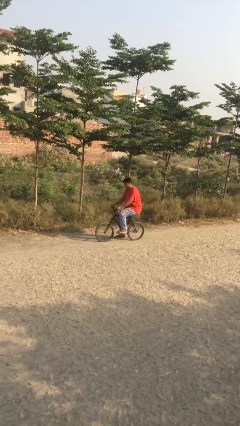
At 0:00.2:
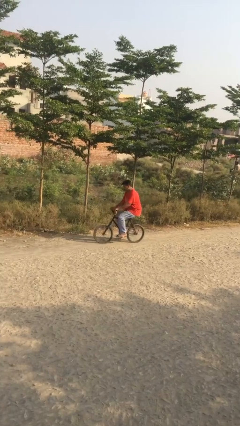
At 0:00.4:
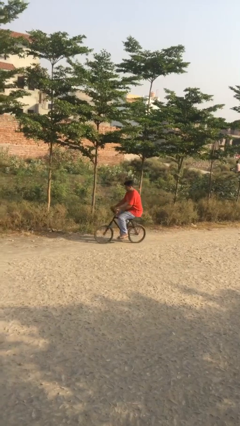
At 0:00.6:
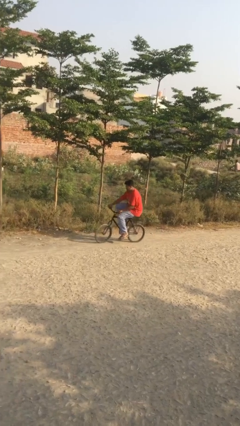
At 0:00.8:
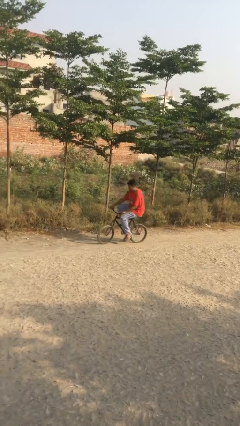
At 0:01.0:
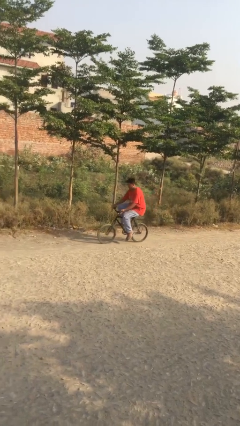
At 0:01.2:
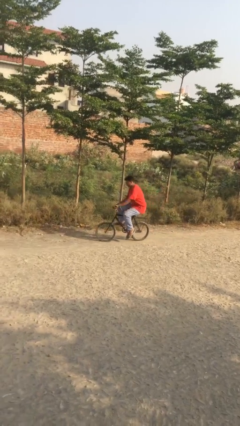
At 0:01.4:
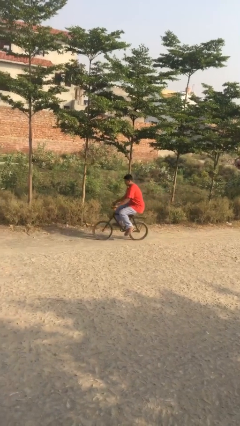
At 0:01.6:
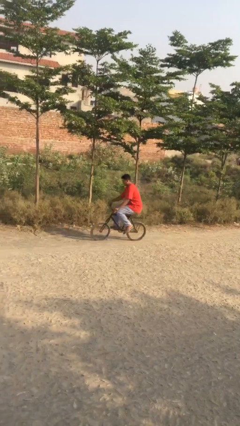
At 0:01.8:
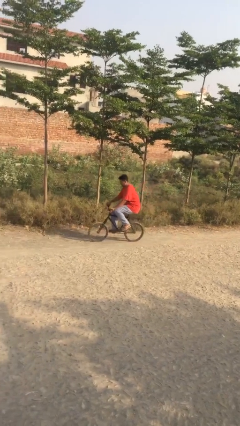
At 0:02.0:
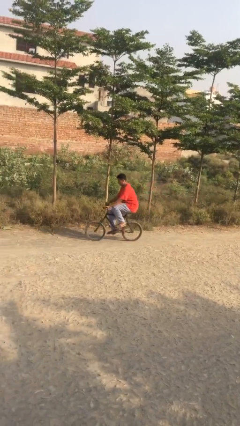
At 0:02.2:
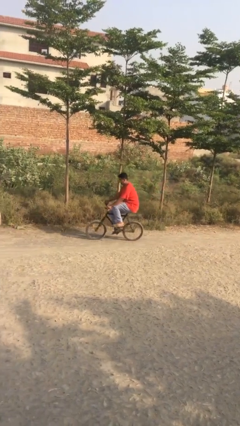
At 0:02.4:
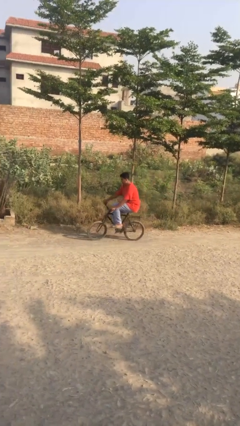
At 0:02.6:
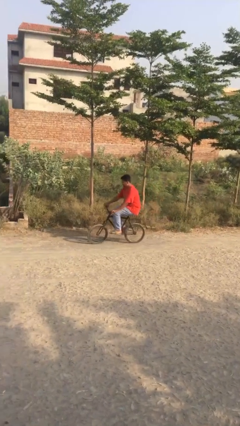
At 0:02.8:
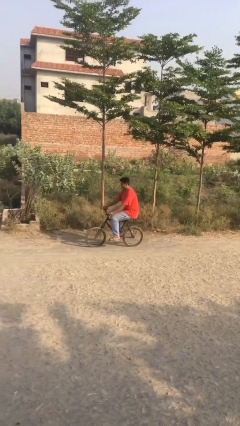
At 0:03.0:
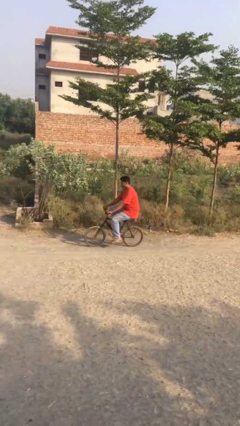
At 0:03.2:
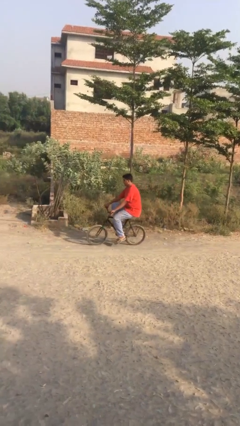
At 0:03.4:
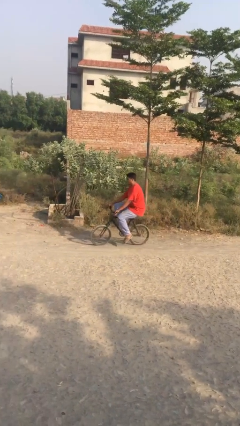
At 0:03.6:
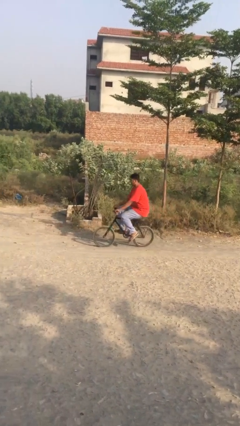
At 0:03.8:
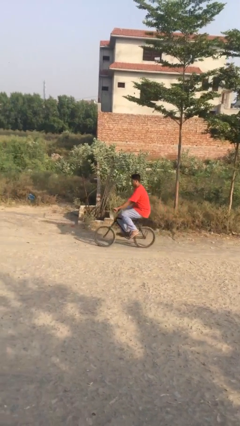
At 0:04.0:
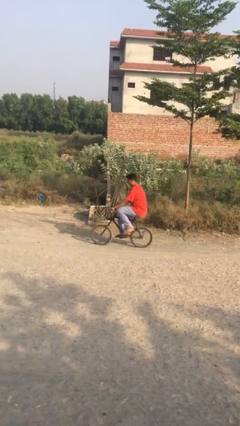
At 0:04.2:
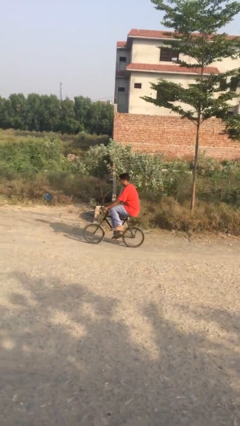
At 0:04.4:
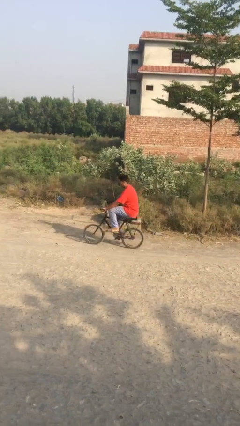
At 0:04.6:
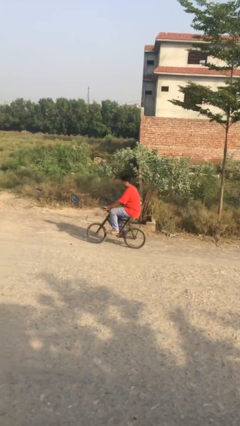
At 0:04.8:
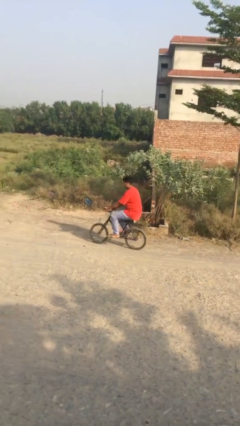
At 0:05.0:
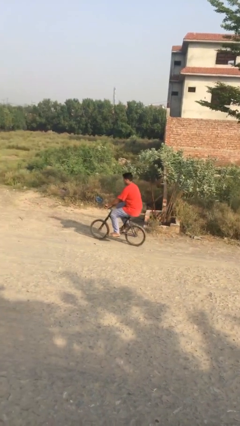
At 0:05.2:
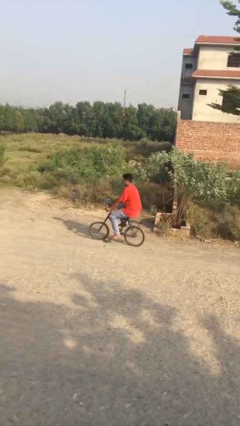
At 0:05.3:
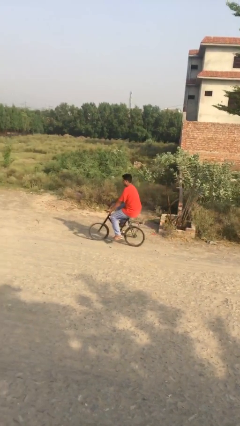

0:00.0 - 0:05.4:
person rides bicycle

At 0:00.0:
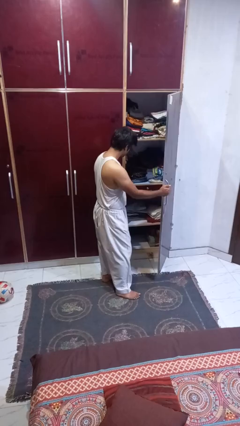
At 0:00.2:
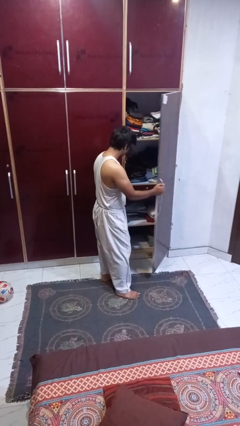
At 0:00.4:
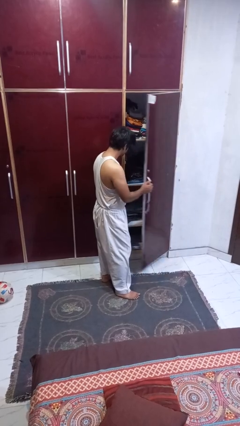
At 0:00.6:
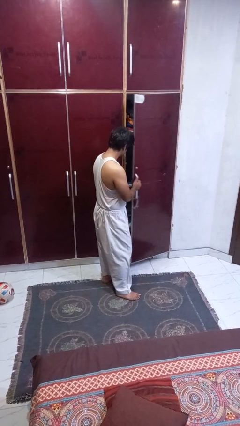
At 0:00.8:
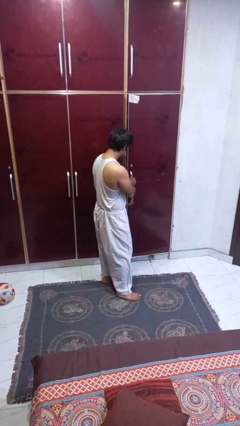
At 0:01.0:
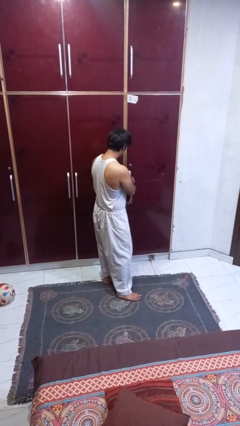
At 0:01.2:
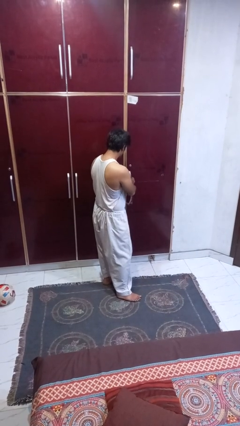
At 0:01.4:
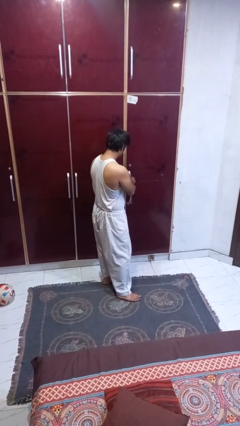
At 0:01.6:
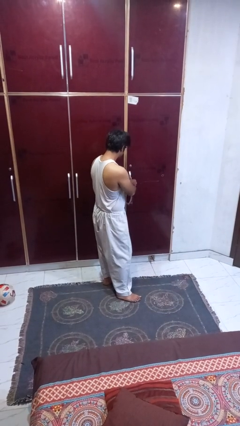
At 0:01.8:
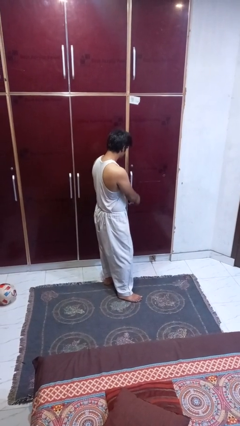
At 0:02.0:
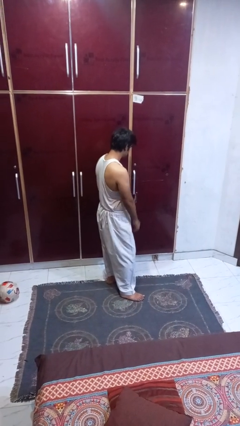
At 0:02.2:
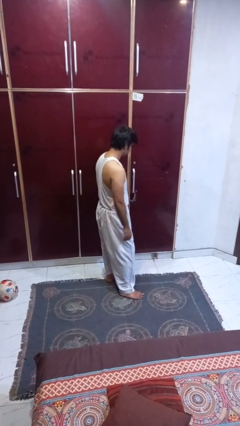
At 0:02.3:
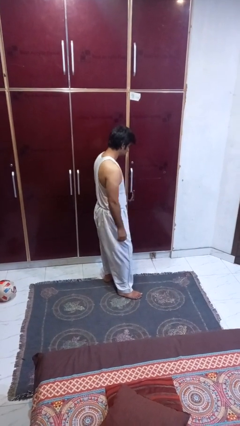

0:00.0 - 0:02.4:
person closes closet door

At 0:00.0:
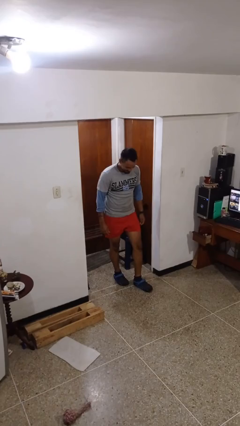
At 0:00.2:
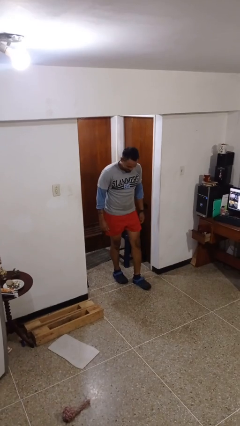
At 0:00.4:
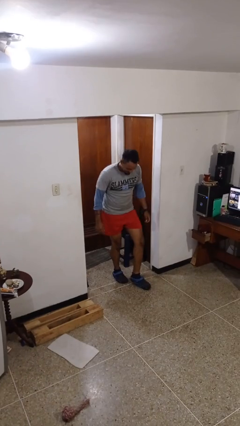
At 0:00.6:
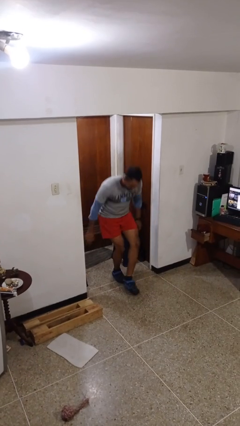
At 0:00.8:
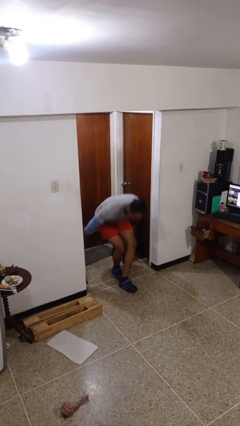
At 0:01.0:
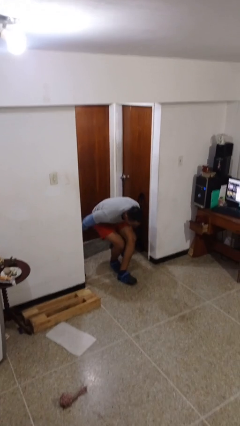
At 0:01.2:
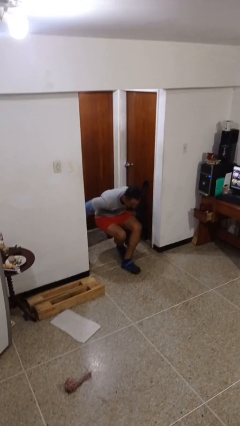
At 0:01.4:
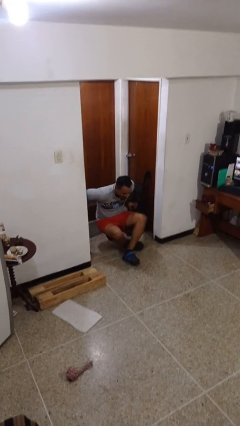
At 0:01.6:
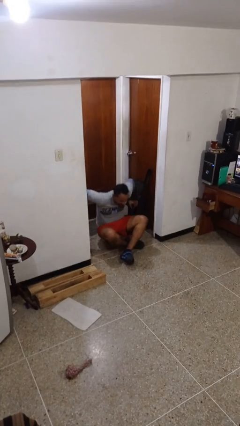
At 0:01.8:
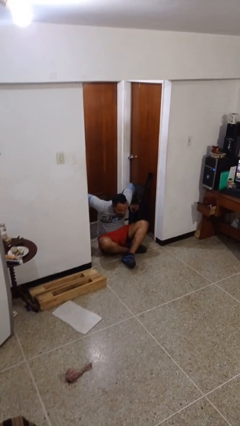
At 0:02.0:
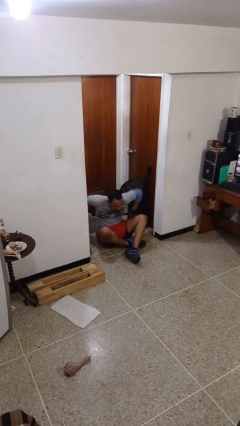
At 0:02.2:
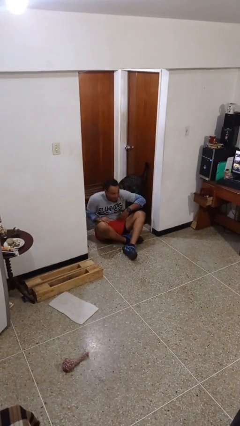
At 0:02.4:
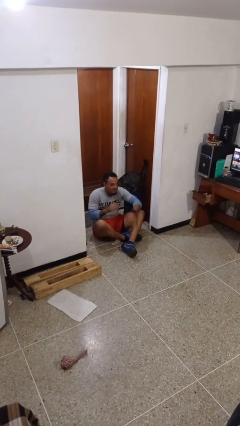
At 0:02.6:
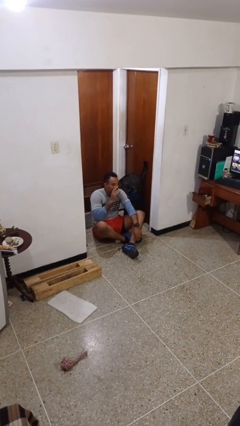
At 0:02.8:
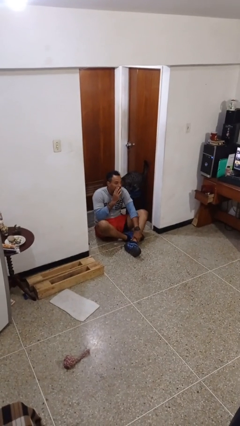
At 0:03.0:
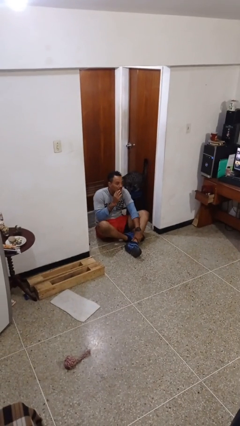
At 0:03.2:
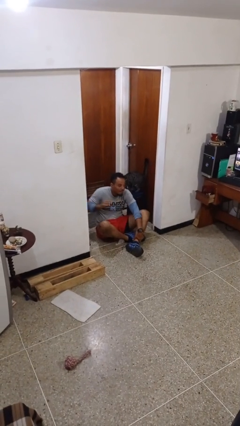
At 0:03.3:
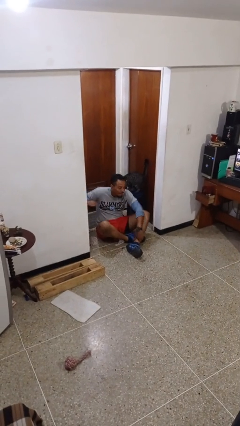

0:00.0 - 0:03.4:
person sits crisscross

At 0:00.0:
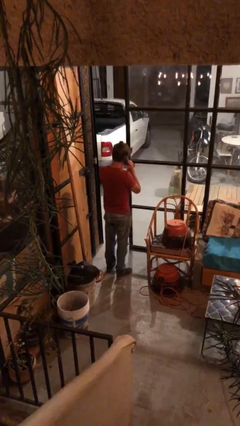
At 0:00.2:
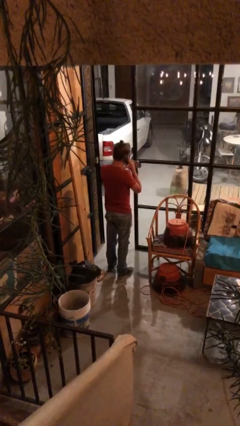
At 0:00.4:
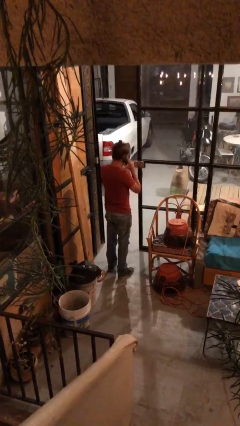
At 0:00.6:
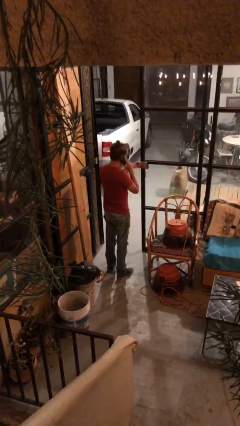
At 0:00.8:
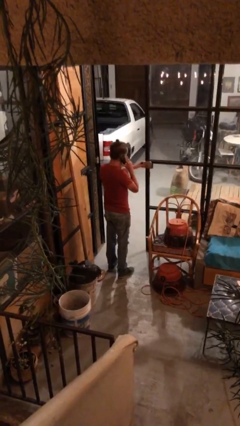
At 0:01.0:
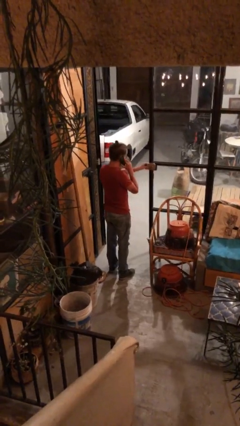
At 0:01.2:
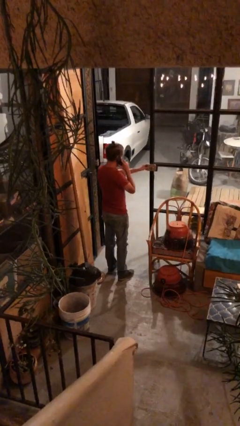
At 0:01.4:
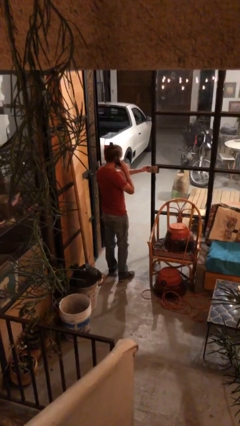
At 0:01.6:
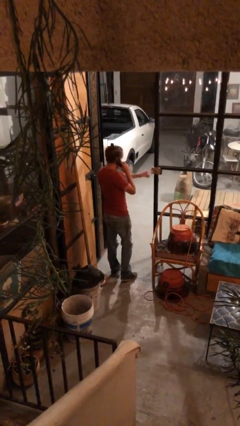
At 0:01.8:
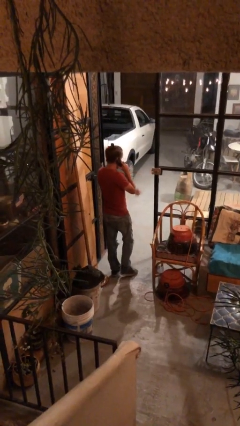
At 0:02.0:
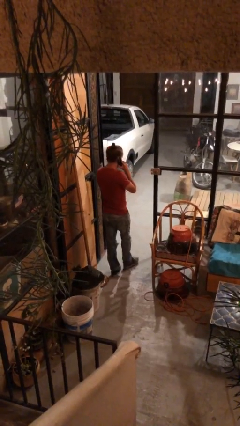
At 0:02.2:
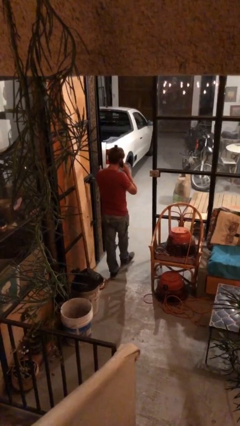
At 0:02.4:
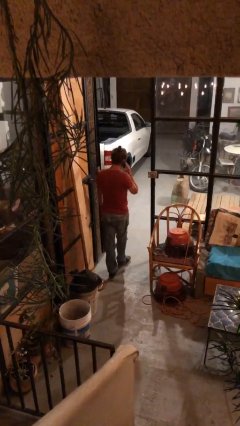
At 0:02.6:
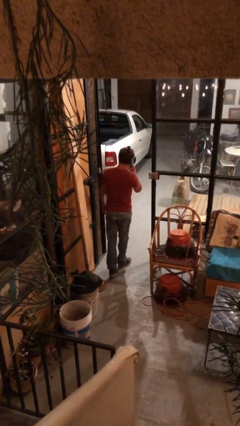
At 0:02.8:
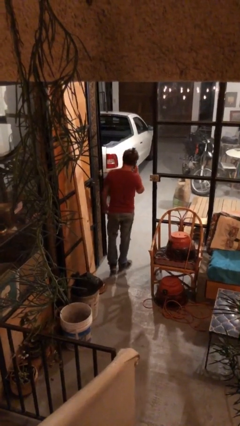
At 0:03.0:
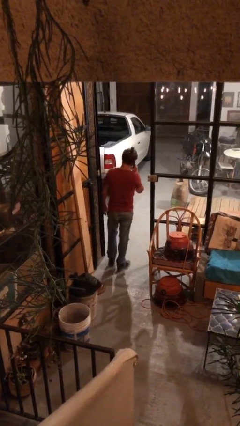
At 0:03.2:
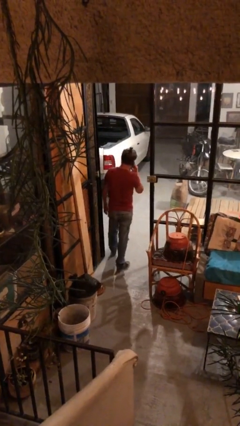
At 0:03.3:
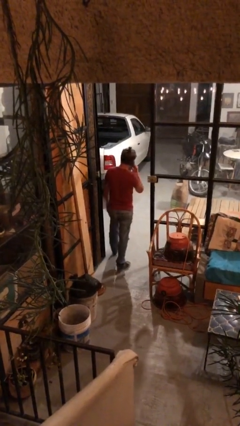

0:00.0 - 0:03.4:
person exits scene through structure

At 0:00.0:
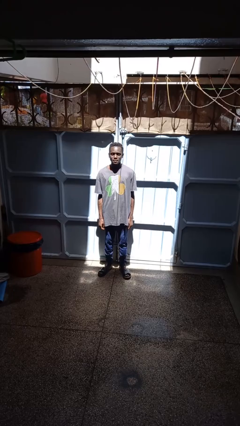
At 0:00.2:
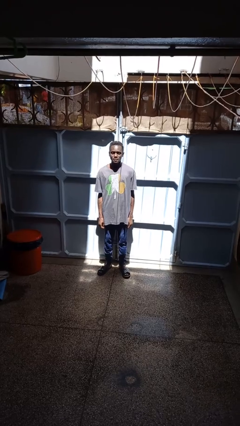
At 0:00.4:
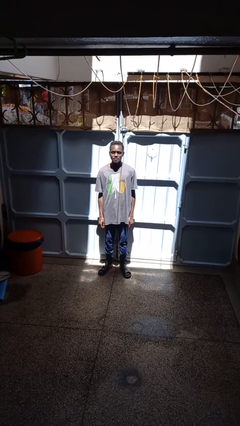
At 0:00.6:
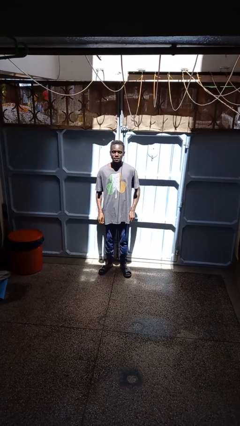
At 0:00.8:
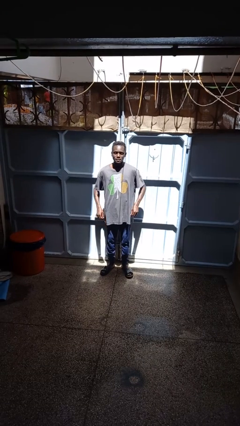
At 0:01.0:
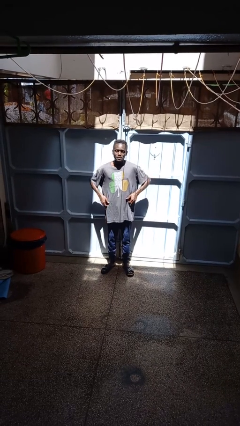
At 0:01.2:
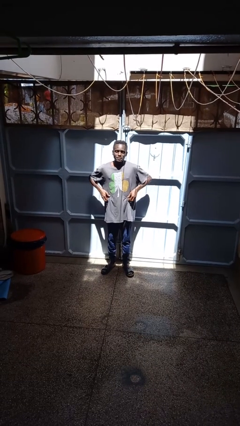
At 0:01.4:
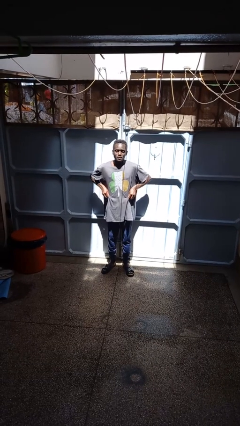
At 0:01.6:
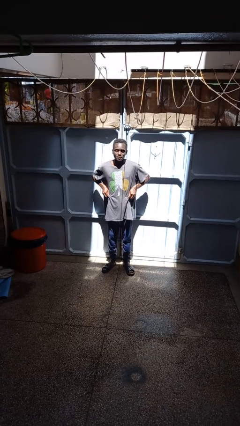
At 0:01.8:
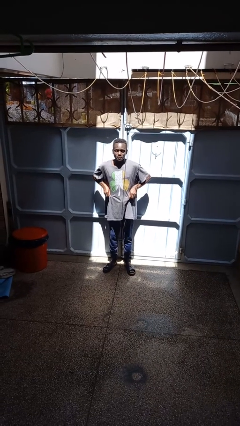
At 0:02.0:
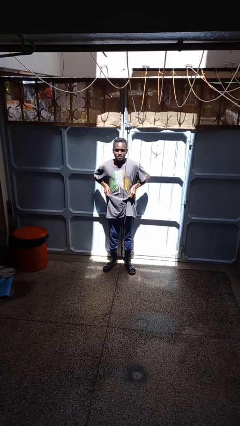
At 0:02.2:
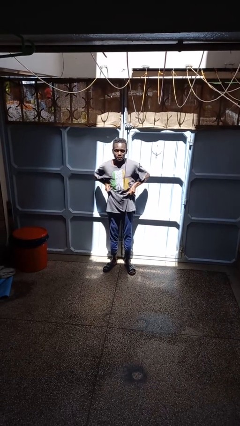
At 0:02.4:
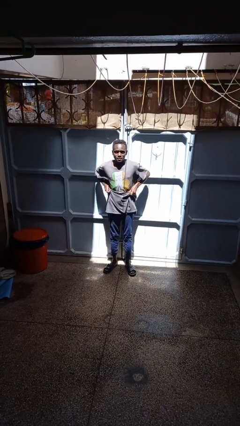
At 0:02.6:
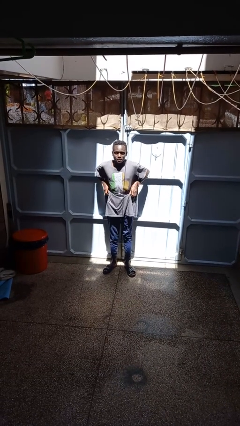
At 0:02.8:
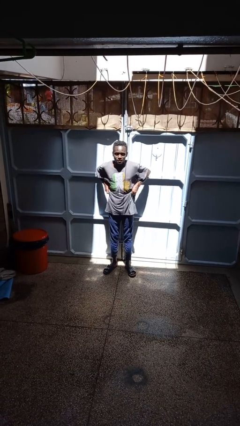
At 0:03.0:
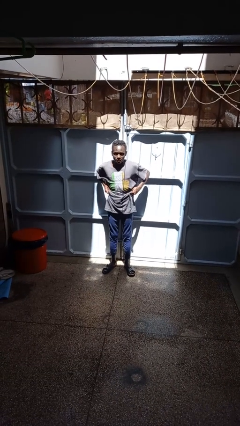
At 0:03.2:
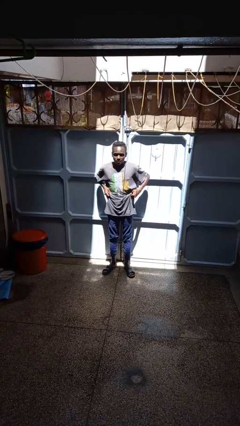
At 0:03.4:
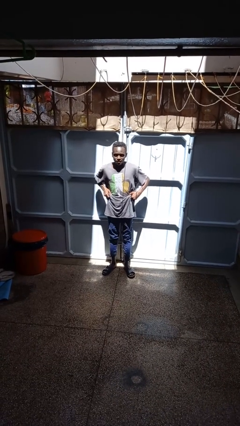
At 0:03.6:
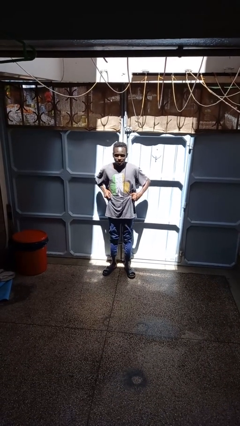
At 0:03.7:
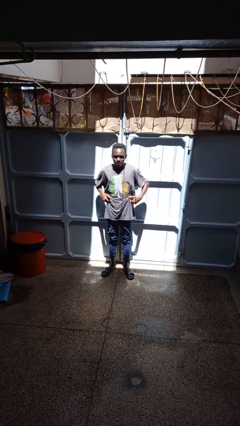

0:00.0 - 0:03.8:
person hikes up pants
